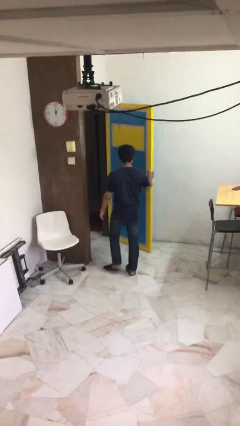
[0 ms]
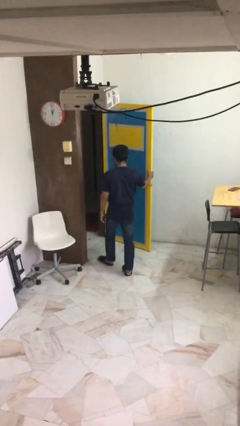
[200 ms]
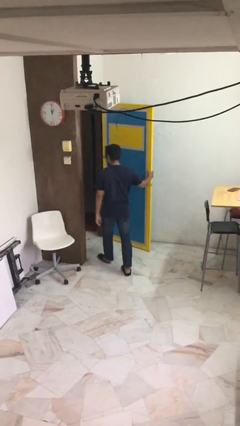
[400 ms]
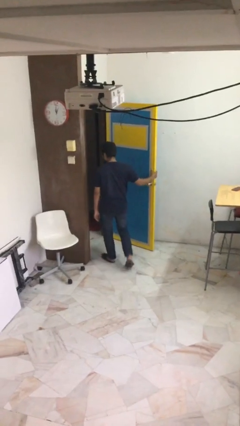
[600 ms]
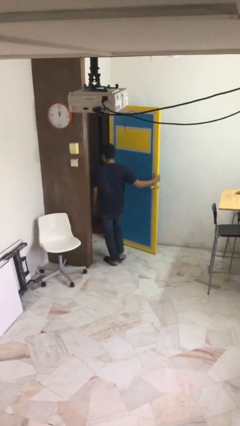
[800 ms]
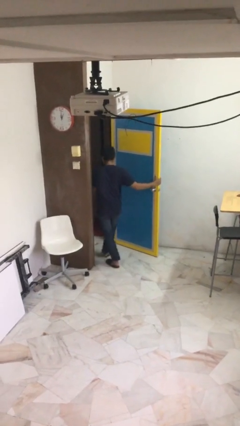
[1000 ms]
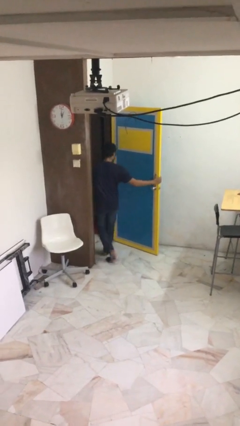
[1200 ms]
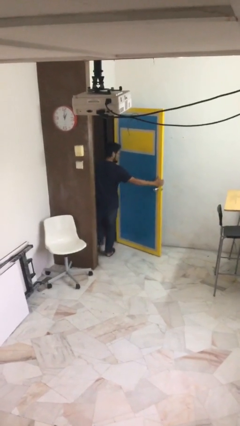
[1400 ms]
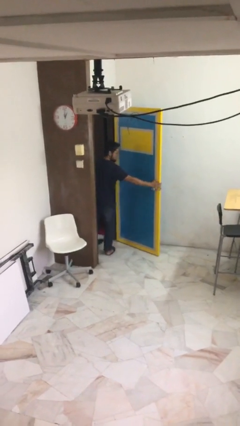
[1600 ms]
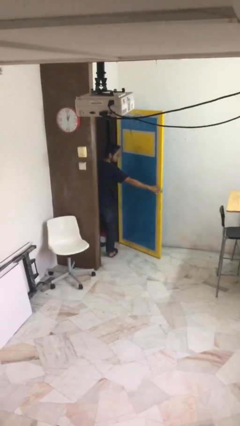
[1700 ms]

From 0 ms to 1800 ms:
person exits scene through structure

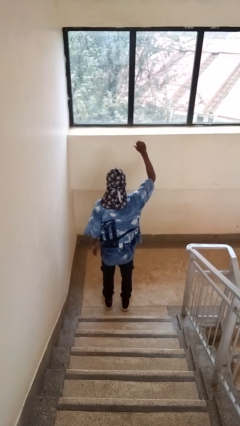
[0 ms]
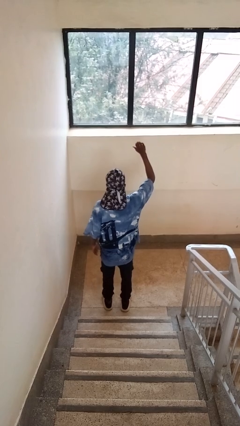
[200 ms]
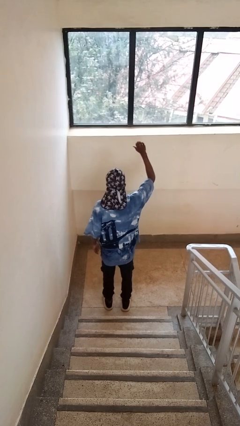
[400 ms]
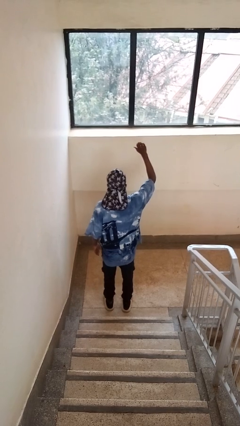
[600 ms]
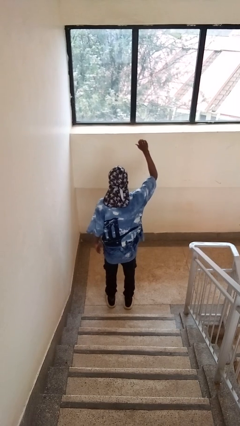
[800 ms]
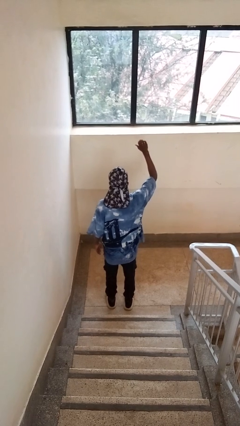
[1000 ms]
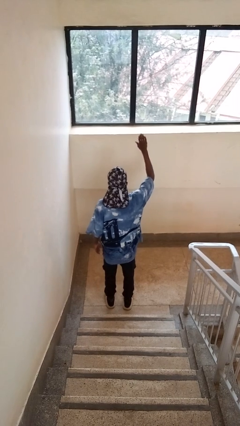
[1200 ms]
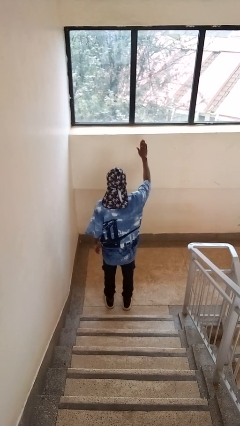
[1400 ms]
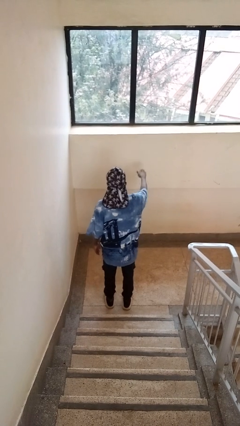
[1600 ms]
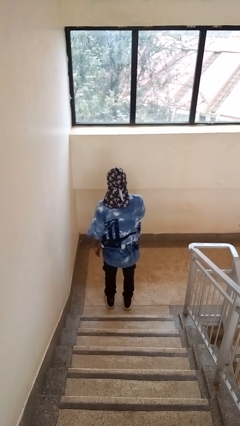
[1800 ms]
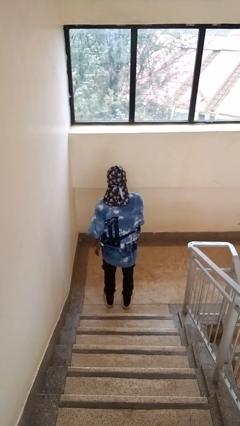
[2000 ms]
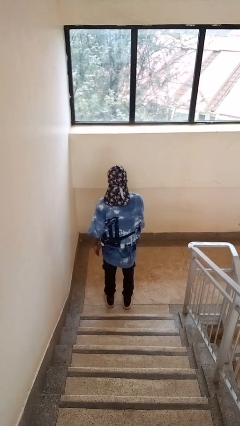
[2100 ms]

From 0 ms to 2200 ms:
person gestures swipe down

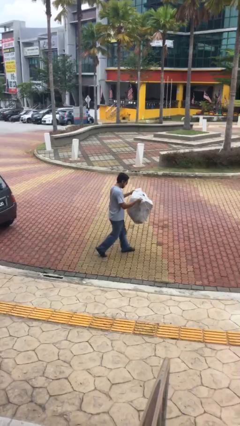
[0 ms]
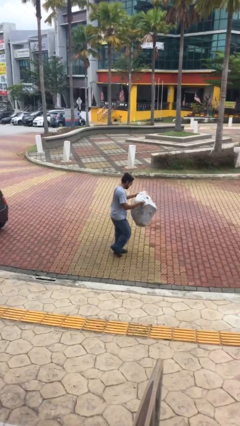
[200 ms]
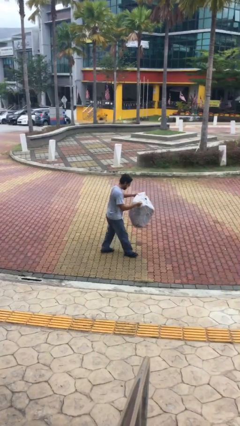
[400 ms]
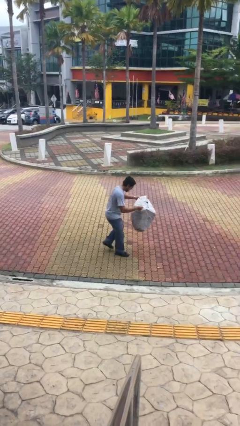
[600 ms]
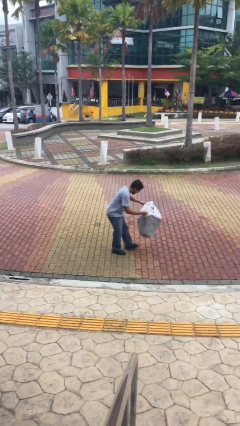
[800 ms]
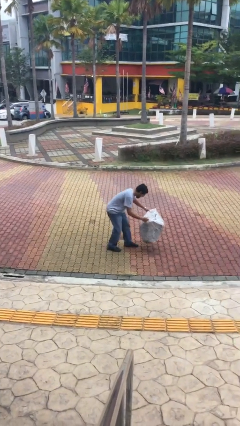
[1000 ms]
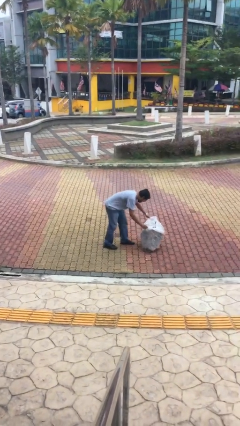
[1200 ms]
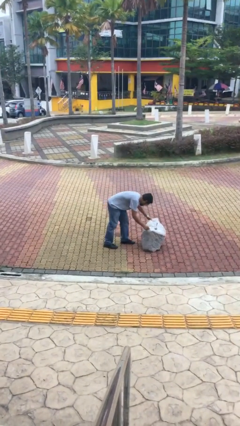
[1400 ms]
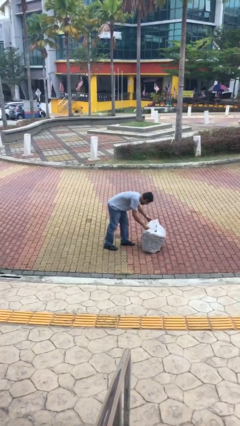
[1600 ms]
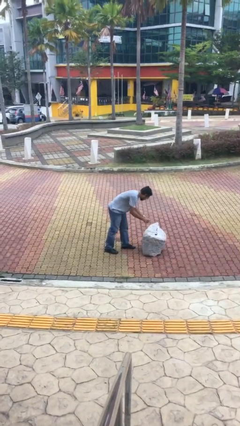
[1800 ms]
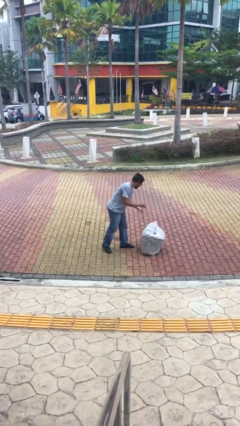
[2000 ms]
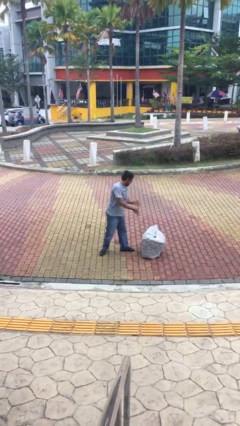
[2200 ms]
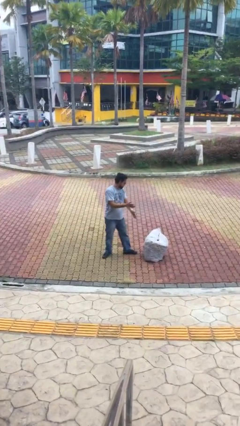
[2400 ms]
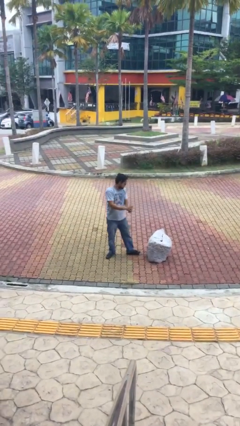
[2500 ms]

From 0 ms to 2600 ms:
person puts down object on floor

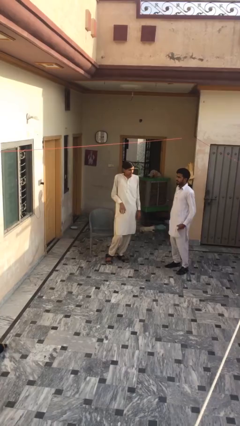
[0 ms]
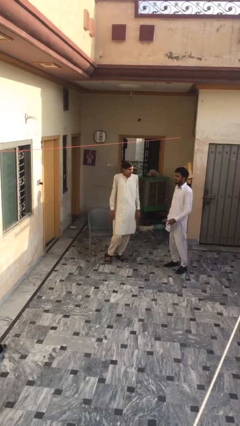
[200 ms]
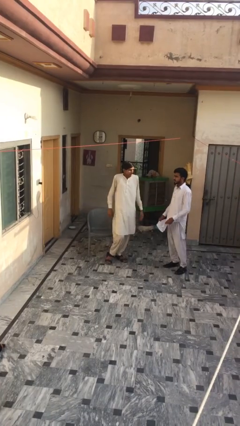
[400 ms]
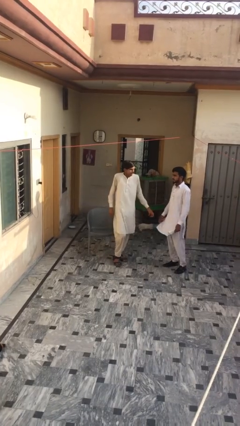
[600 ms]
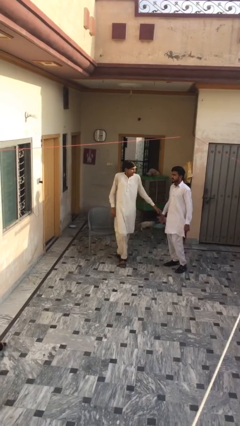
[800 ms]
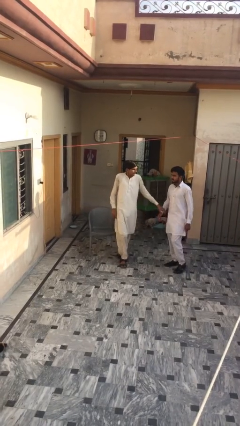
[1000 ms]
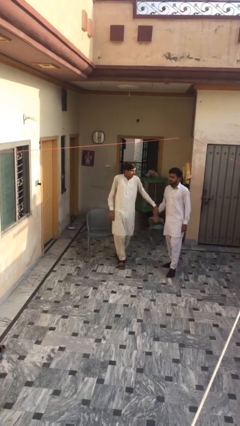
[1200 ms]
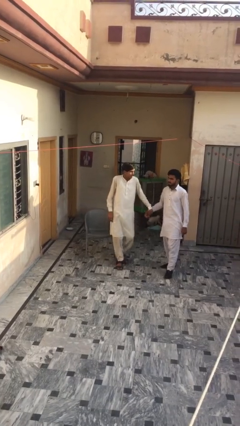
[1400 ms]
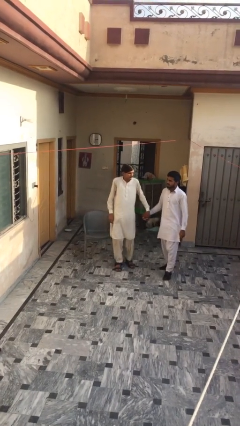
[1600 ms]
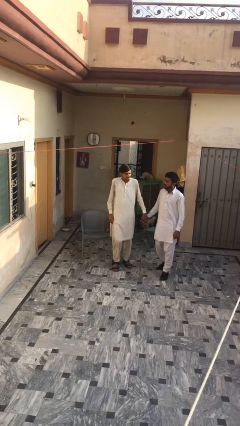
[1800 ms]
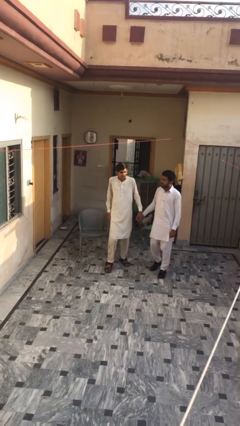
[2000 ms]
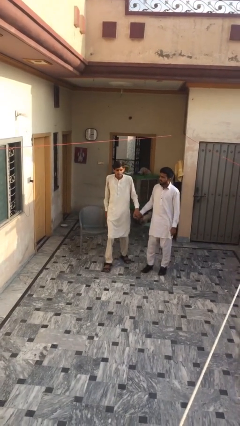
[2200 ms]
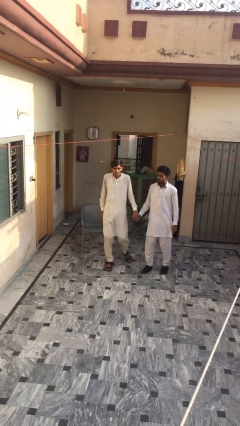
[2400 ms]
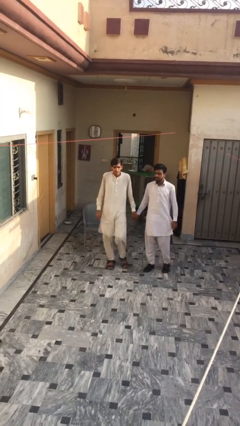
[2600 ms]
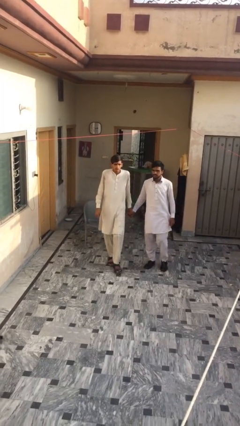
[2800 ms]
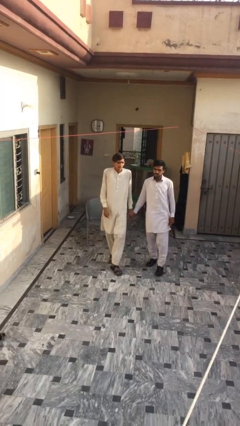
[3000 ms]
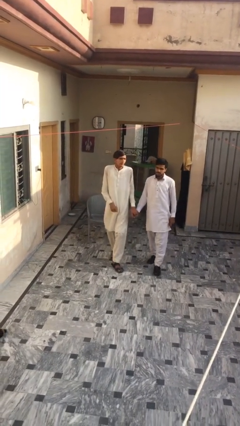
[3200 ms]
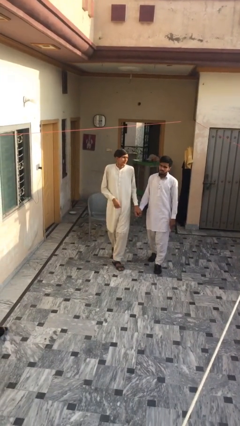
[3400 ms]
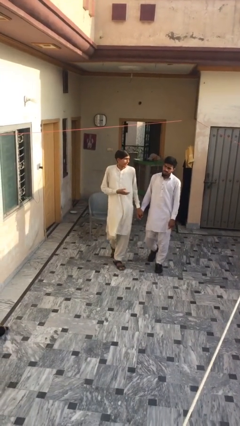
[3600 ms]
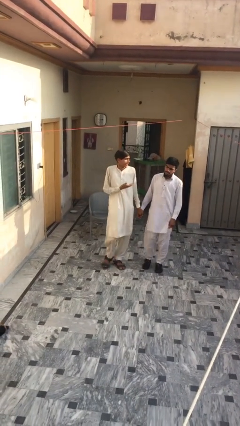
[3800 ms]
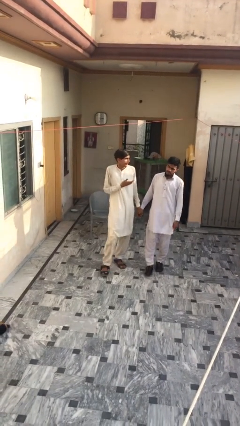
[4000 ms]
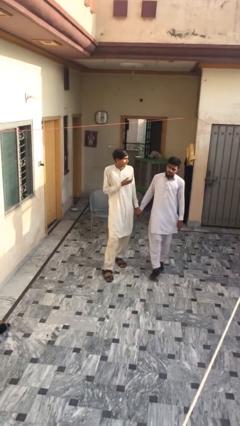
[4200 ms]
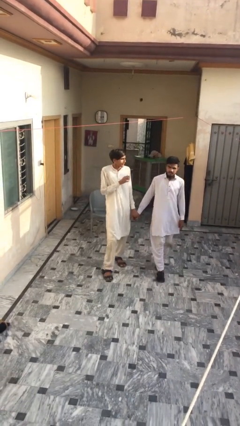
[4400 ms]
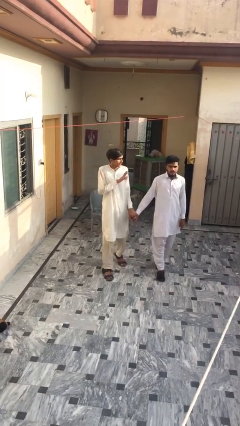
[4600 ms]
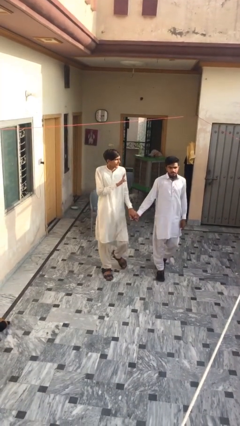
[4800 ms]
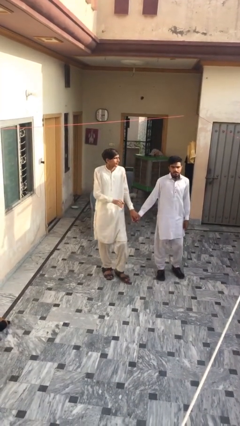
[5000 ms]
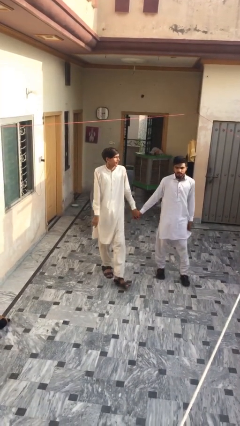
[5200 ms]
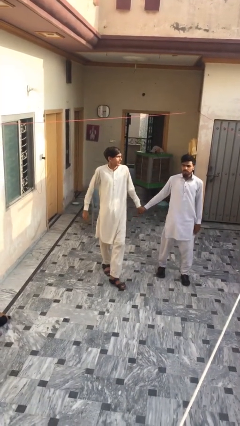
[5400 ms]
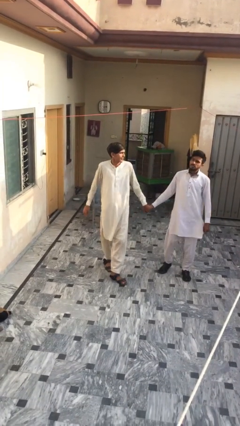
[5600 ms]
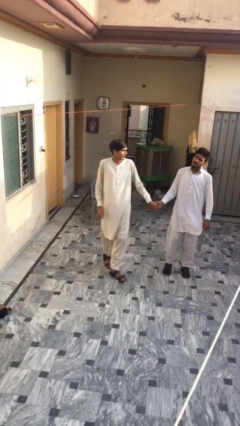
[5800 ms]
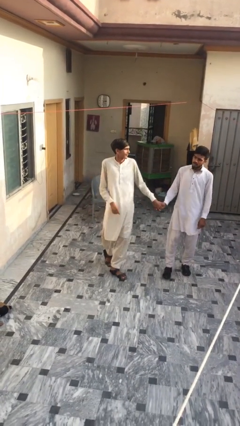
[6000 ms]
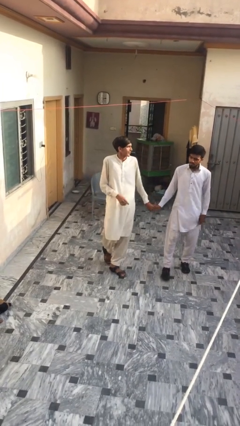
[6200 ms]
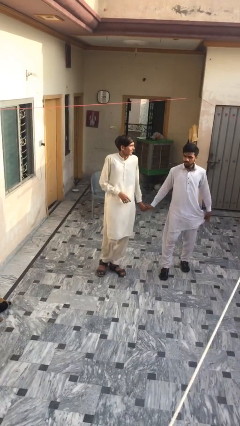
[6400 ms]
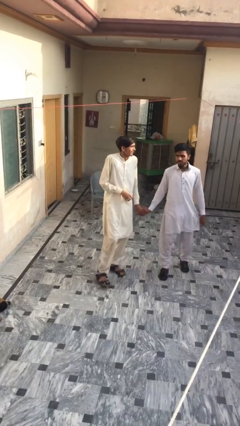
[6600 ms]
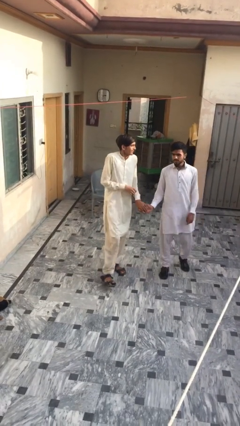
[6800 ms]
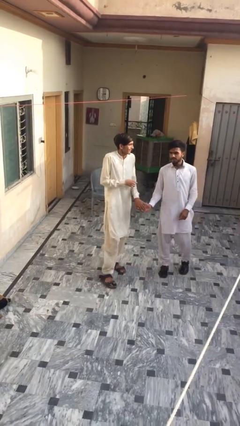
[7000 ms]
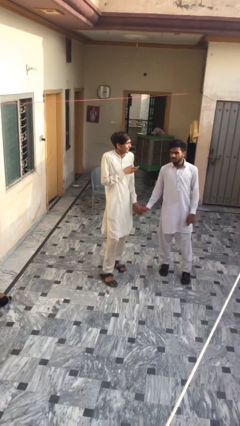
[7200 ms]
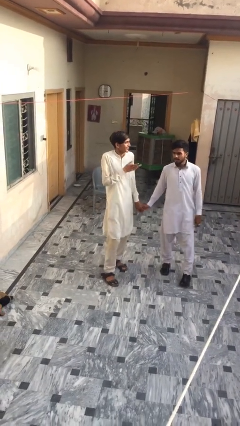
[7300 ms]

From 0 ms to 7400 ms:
person holds hand

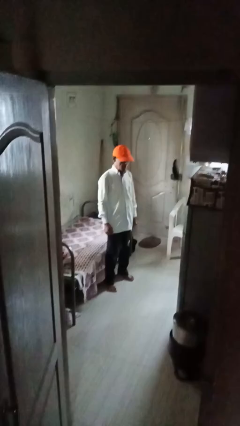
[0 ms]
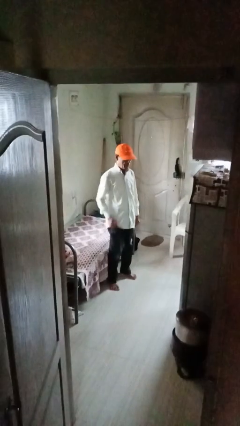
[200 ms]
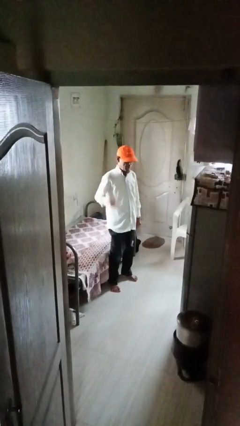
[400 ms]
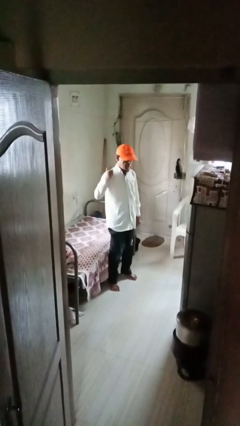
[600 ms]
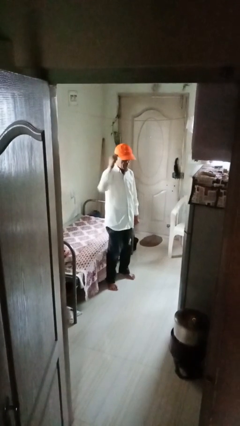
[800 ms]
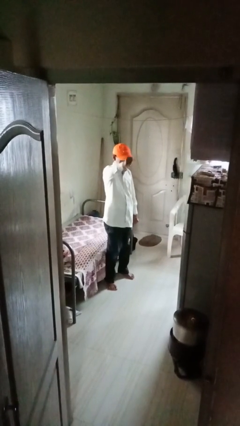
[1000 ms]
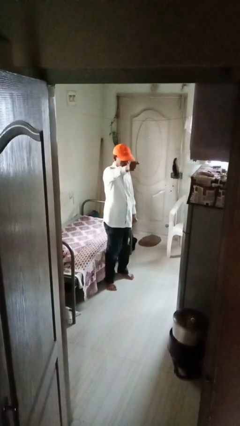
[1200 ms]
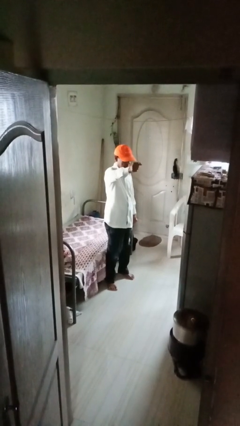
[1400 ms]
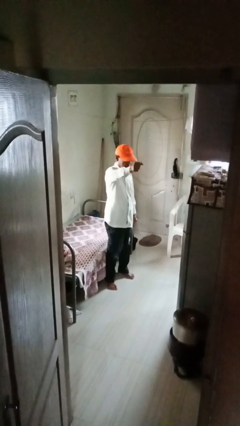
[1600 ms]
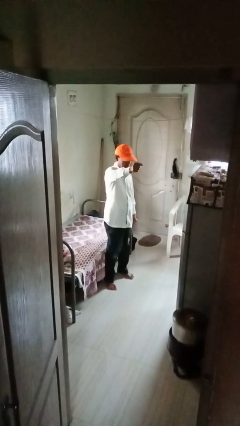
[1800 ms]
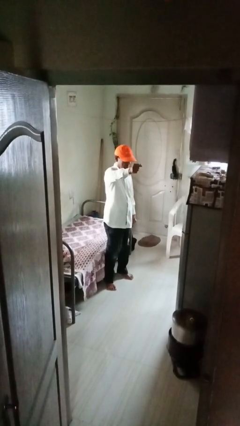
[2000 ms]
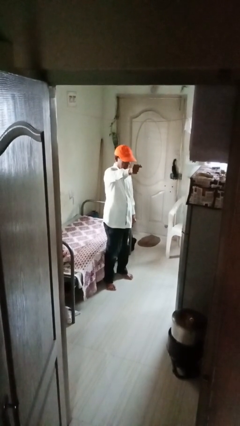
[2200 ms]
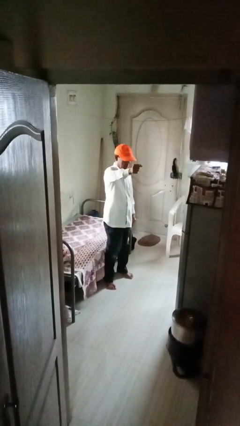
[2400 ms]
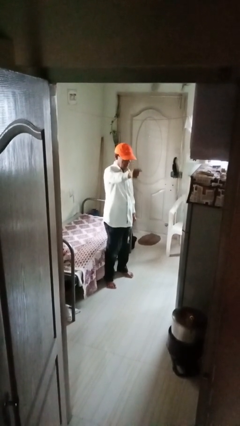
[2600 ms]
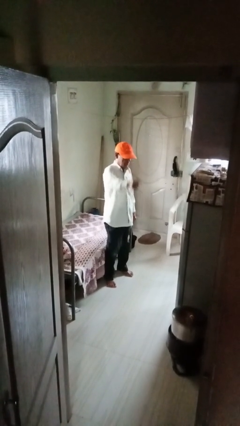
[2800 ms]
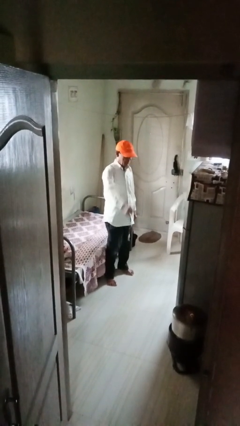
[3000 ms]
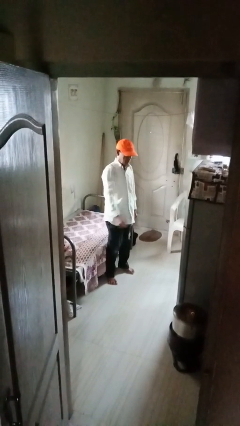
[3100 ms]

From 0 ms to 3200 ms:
person punches

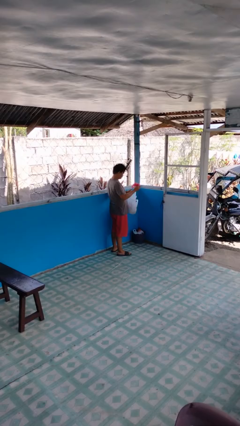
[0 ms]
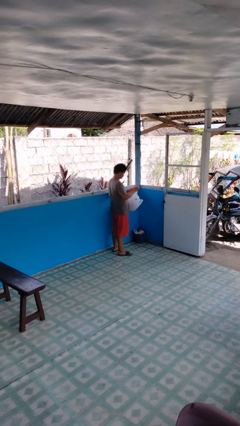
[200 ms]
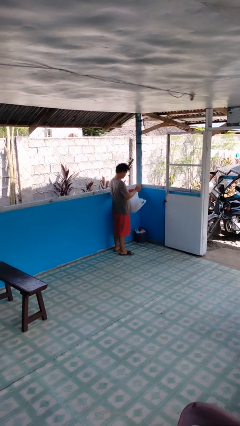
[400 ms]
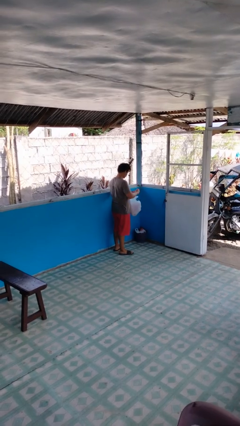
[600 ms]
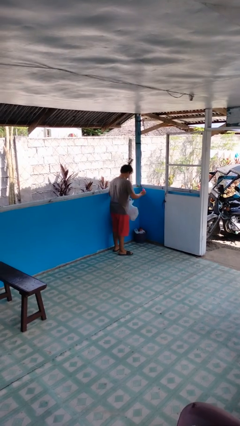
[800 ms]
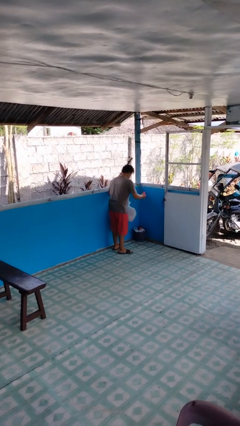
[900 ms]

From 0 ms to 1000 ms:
person discards trash
